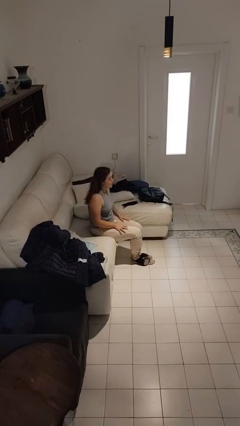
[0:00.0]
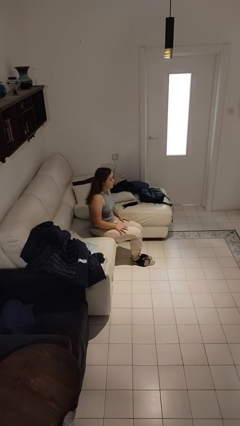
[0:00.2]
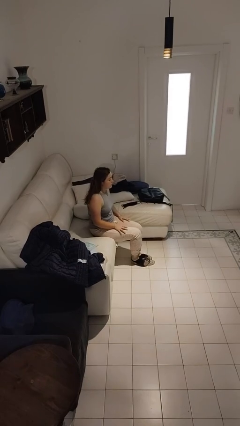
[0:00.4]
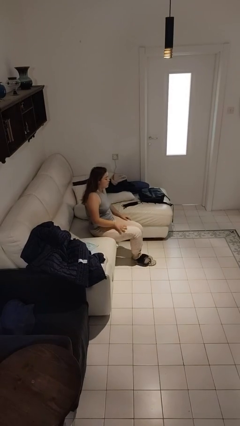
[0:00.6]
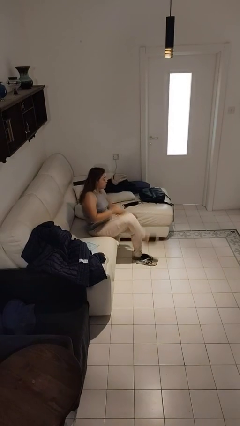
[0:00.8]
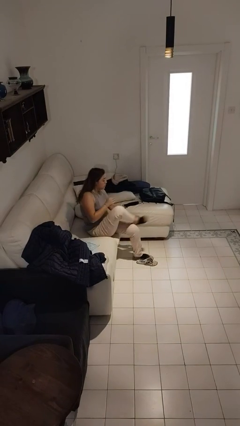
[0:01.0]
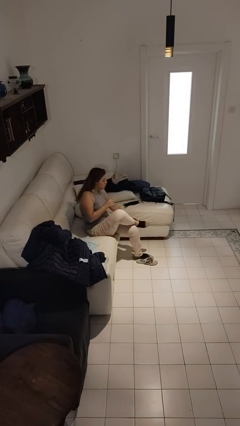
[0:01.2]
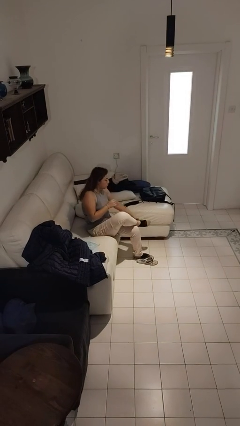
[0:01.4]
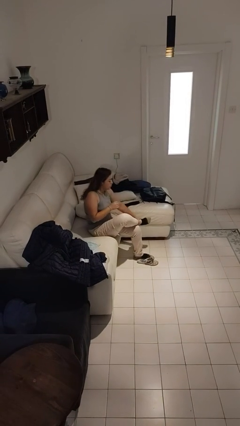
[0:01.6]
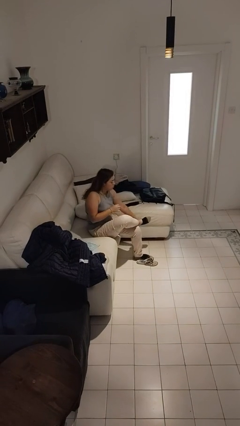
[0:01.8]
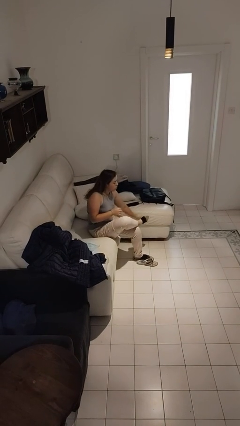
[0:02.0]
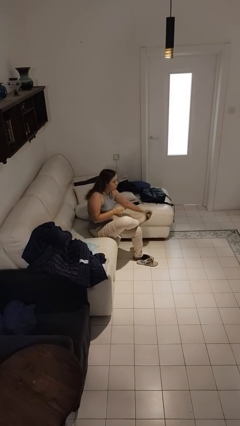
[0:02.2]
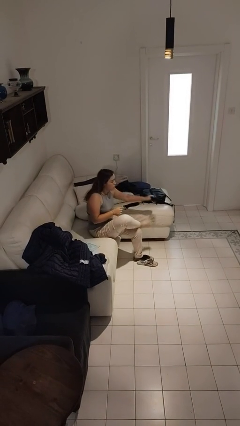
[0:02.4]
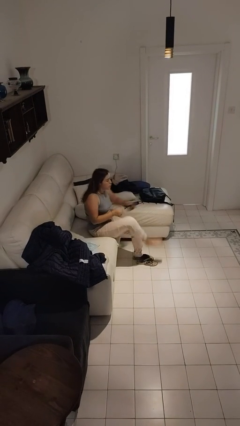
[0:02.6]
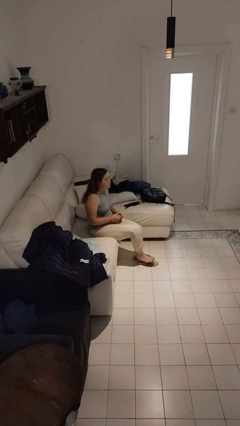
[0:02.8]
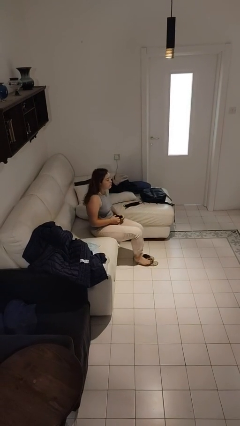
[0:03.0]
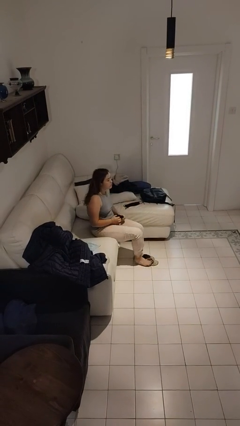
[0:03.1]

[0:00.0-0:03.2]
person takes off socks

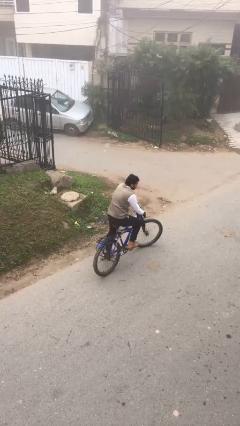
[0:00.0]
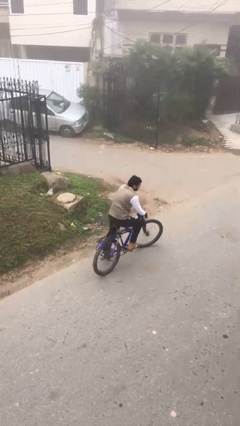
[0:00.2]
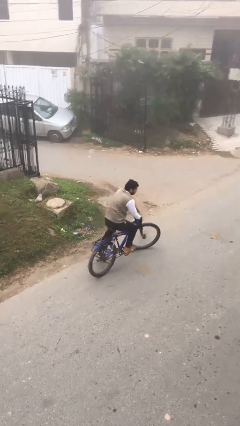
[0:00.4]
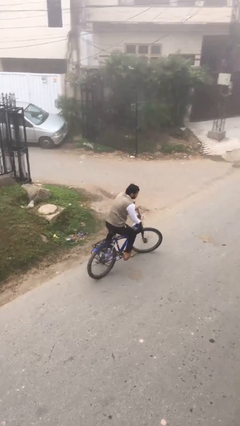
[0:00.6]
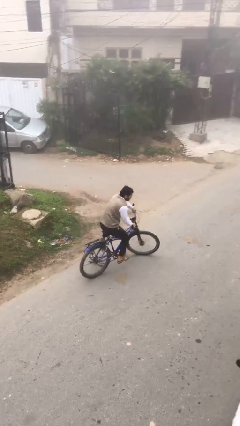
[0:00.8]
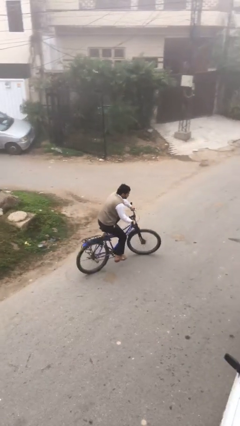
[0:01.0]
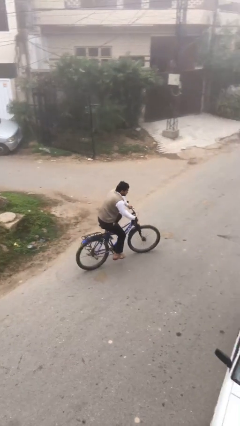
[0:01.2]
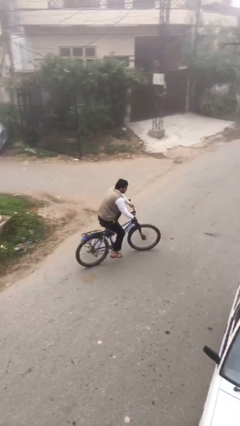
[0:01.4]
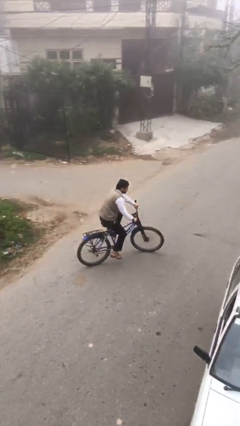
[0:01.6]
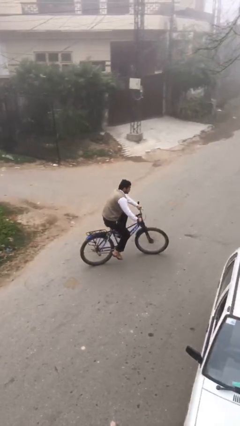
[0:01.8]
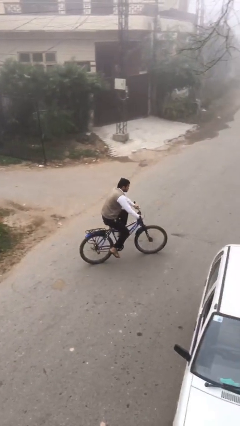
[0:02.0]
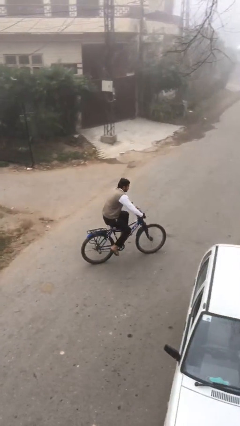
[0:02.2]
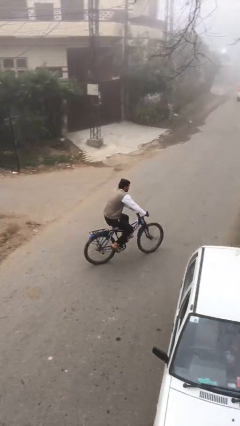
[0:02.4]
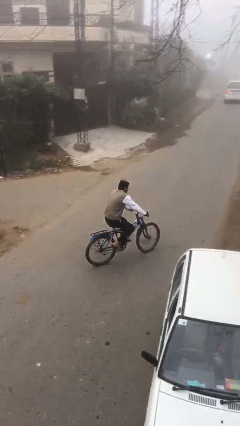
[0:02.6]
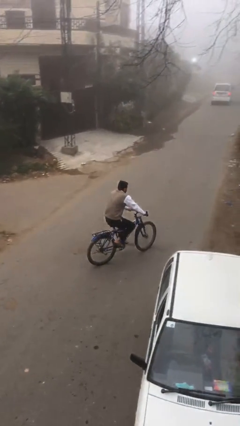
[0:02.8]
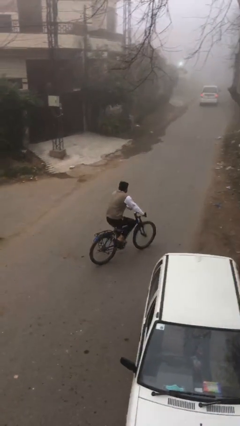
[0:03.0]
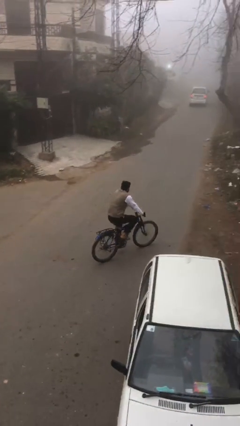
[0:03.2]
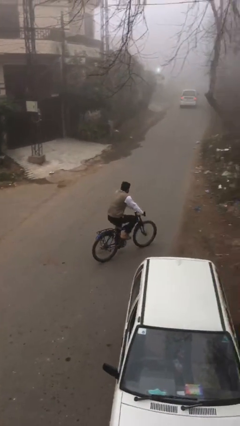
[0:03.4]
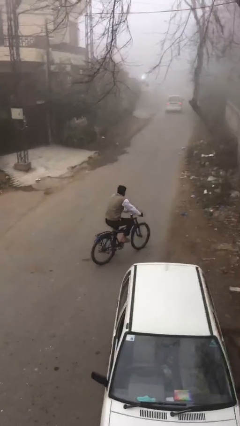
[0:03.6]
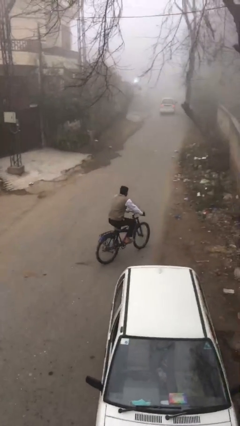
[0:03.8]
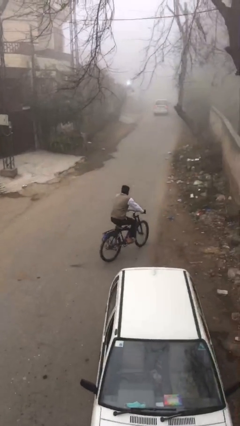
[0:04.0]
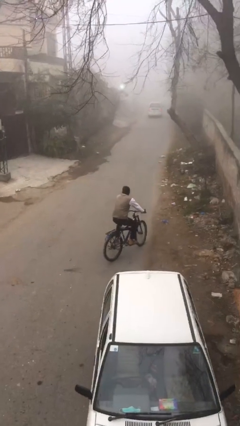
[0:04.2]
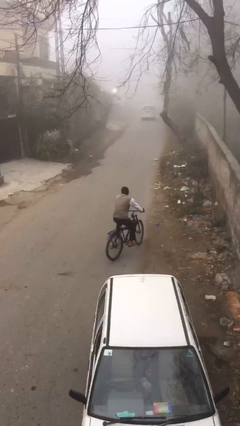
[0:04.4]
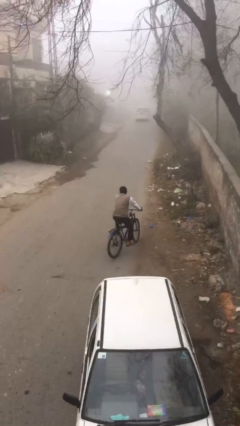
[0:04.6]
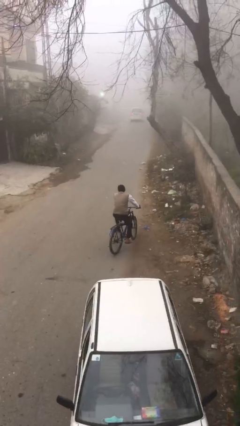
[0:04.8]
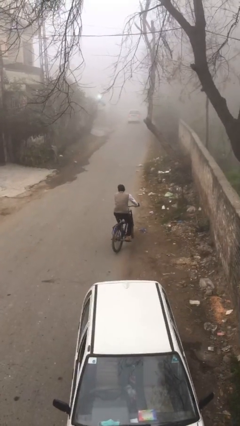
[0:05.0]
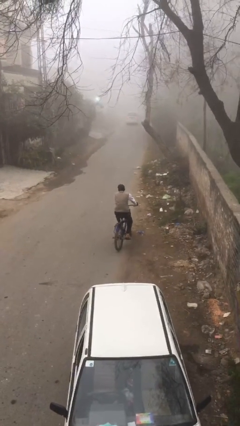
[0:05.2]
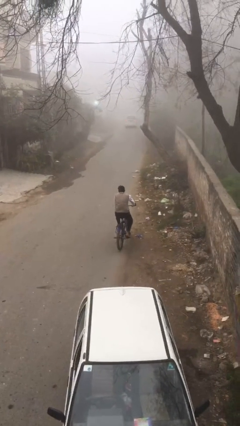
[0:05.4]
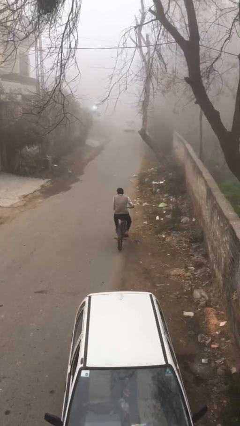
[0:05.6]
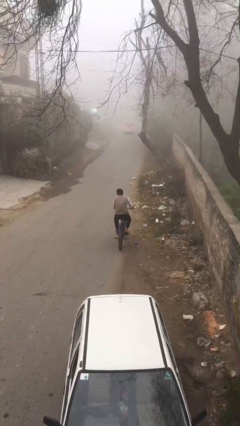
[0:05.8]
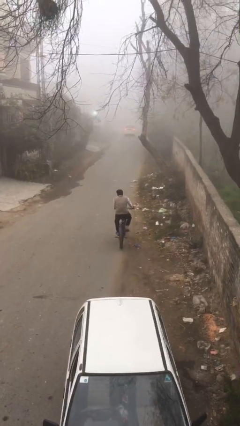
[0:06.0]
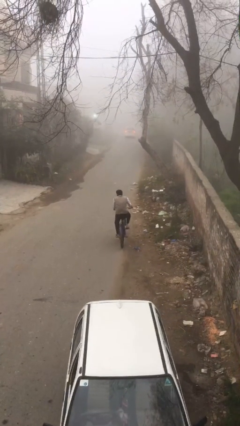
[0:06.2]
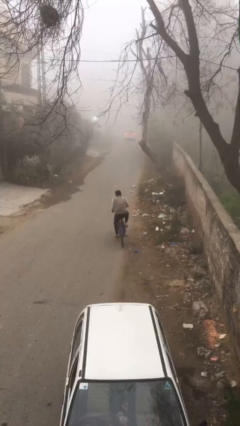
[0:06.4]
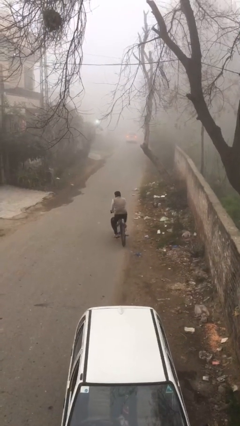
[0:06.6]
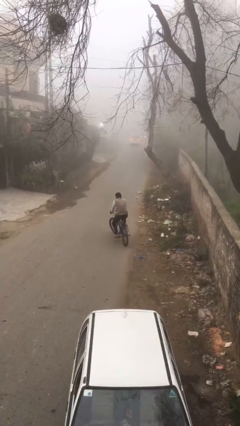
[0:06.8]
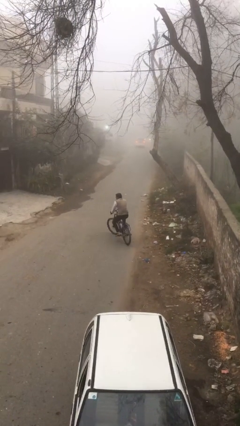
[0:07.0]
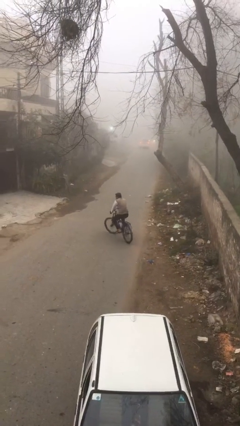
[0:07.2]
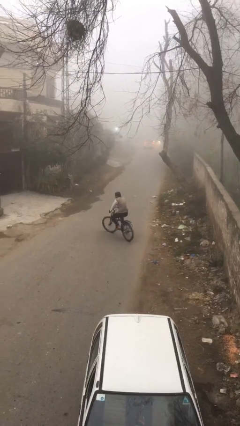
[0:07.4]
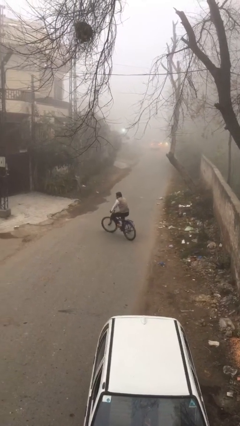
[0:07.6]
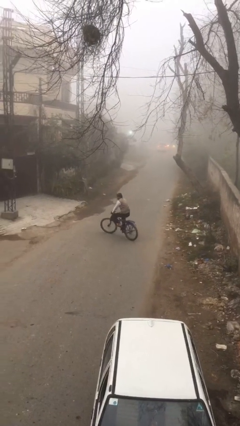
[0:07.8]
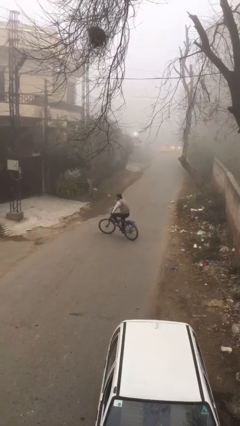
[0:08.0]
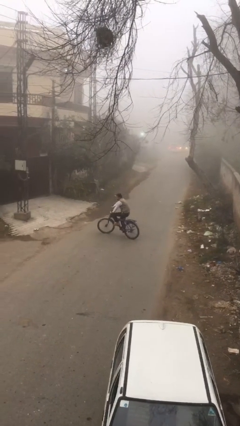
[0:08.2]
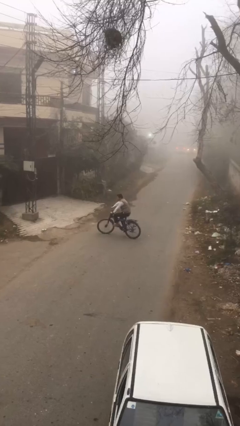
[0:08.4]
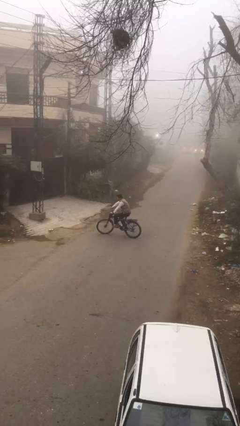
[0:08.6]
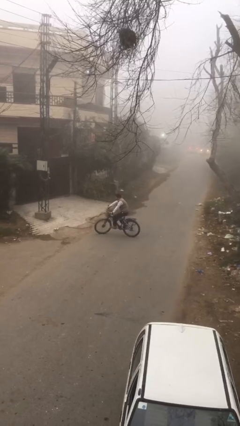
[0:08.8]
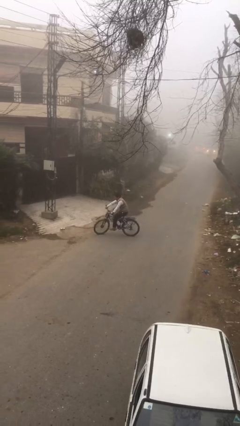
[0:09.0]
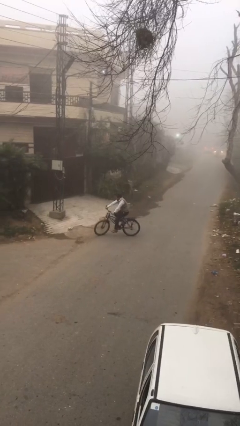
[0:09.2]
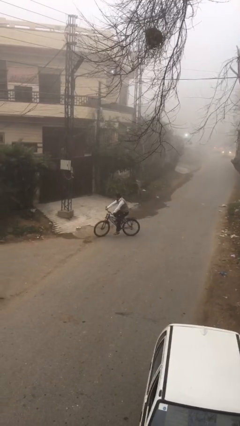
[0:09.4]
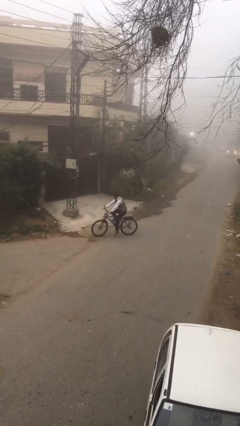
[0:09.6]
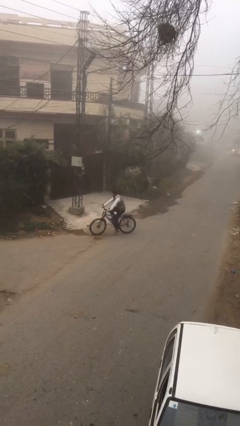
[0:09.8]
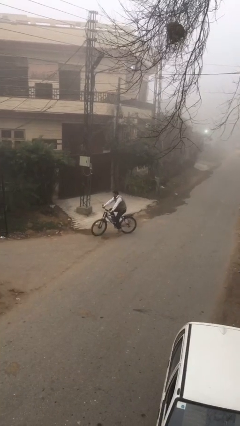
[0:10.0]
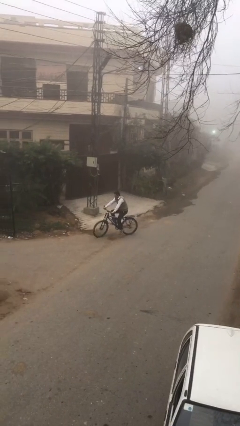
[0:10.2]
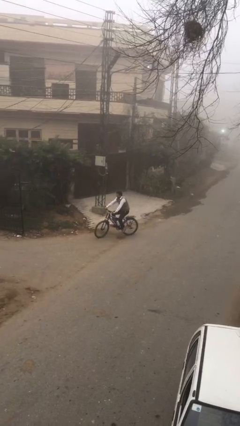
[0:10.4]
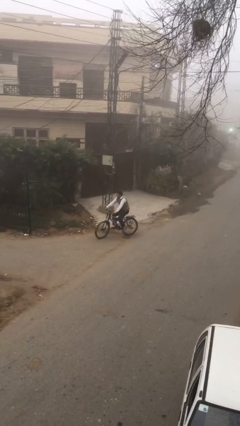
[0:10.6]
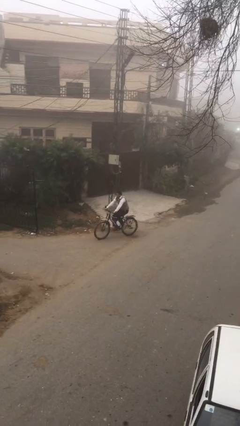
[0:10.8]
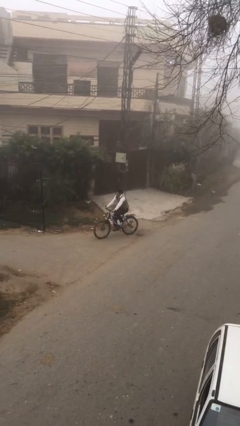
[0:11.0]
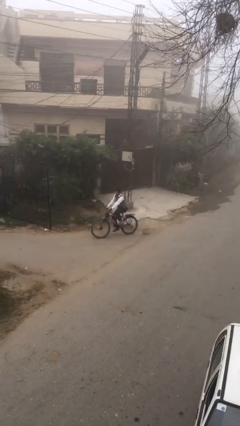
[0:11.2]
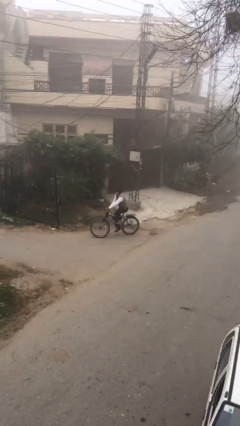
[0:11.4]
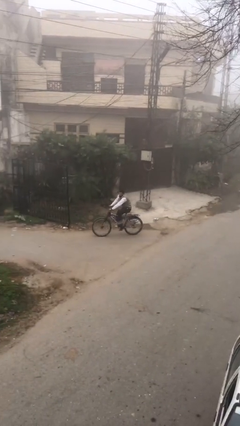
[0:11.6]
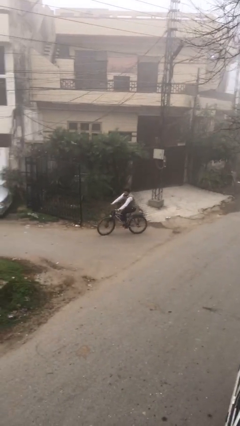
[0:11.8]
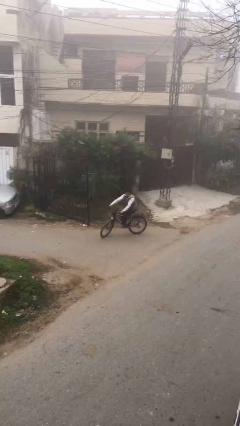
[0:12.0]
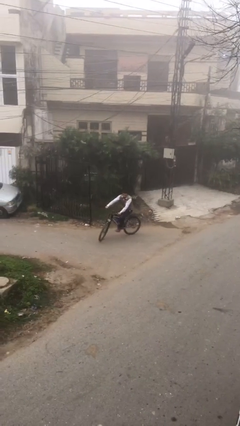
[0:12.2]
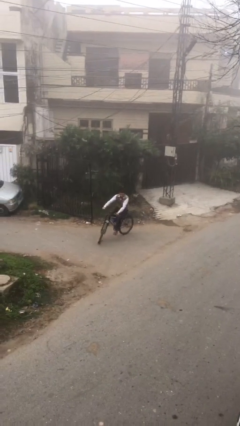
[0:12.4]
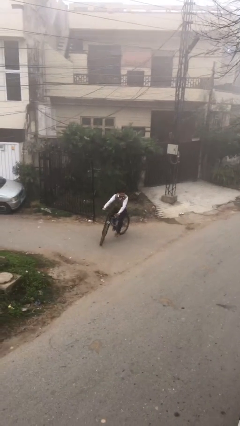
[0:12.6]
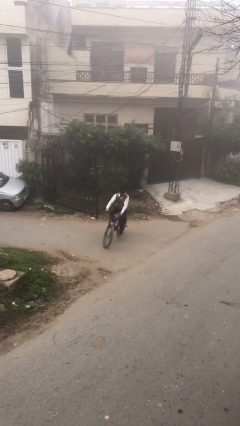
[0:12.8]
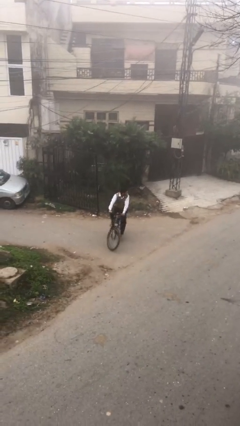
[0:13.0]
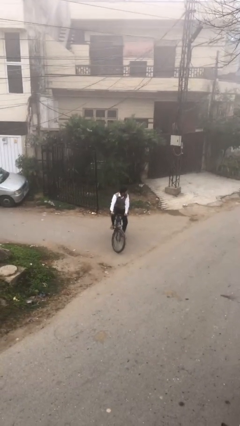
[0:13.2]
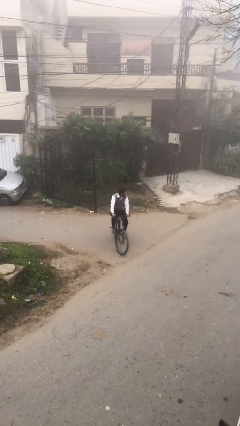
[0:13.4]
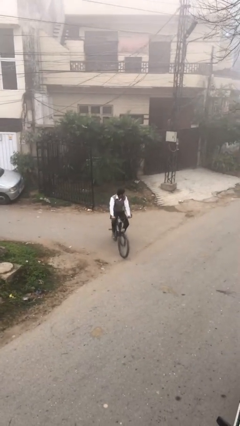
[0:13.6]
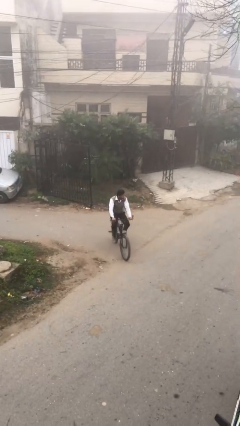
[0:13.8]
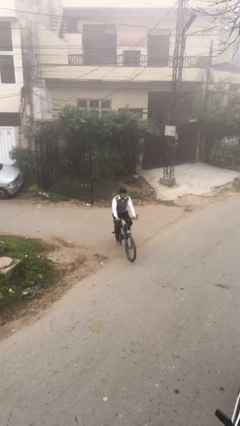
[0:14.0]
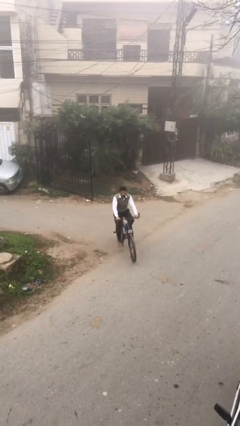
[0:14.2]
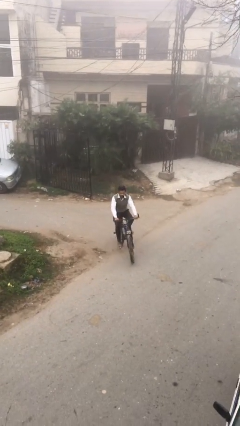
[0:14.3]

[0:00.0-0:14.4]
person rides bicycle

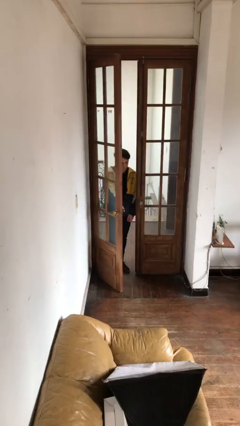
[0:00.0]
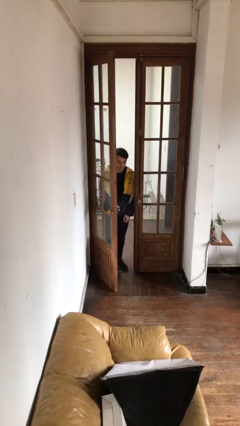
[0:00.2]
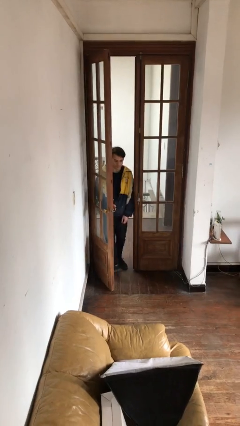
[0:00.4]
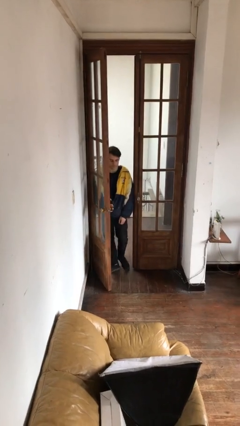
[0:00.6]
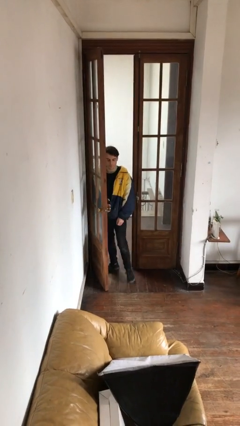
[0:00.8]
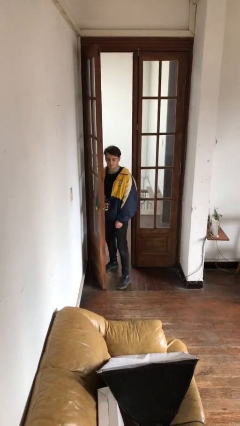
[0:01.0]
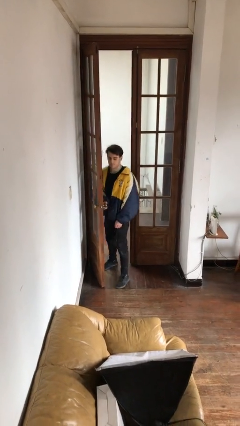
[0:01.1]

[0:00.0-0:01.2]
person enters scene through structure
